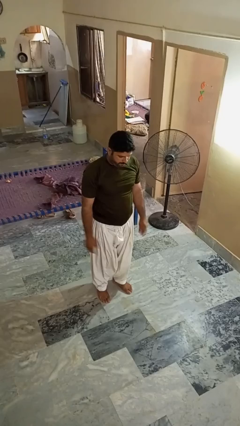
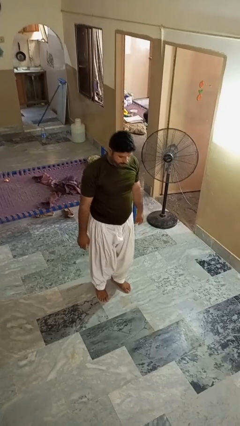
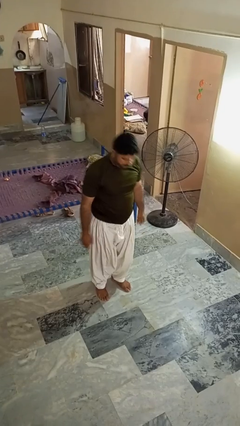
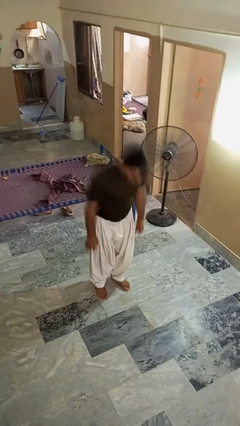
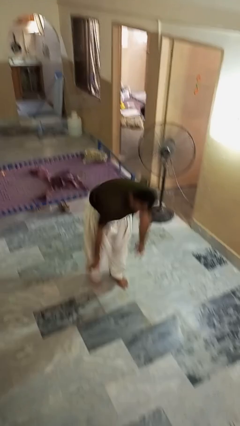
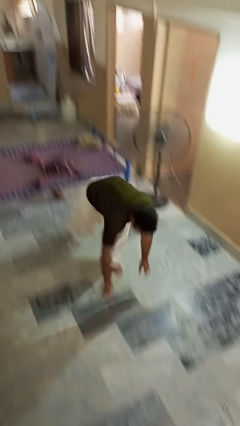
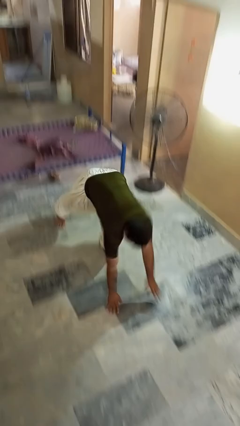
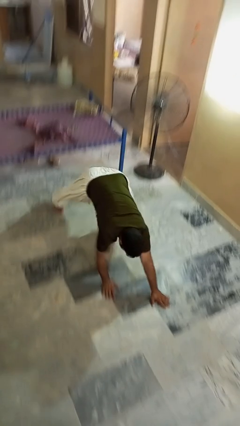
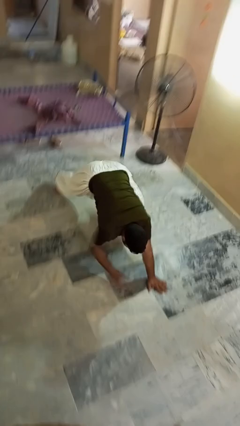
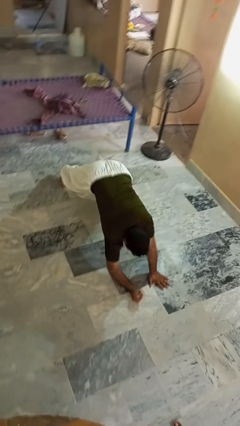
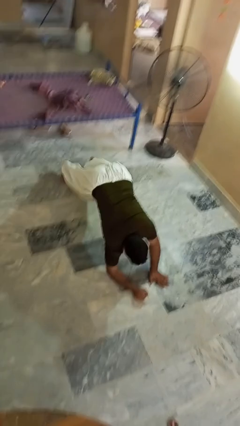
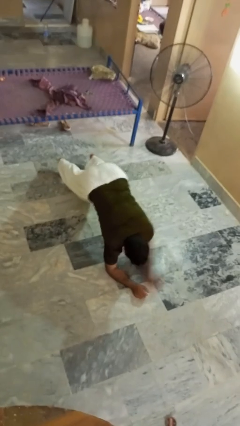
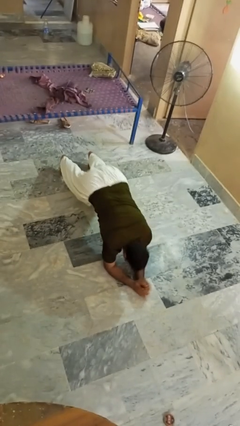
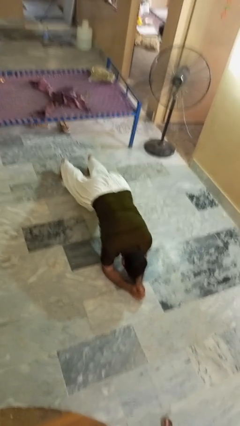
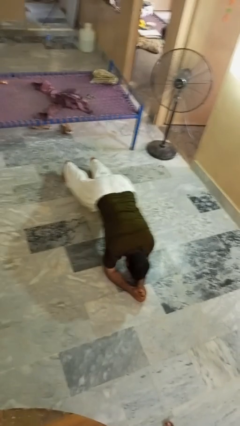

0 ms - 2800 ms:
person exercises with plank

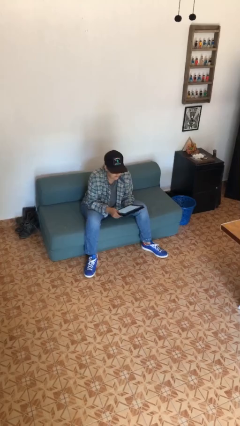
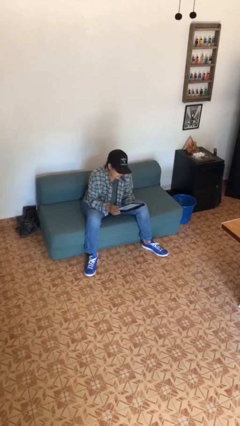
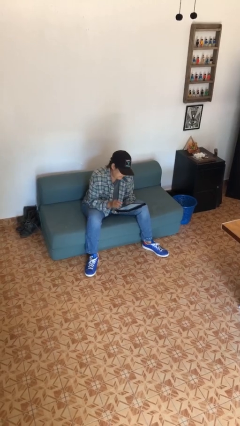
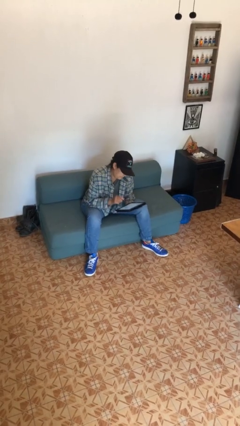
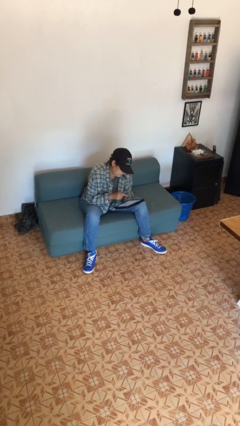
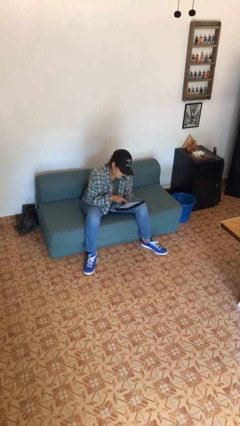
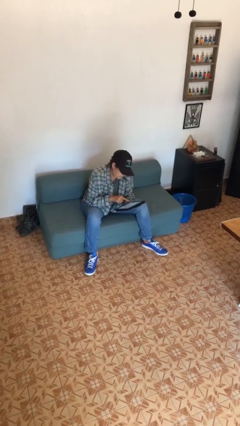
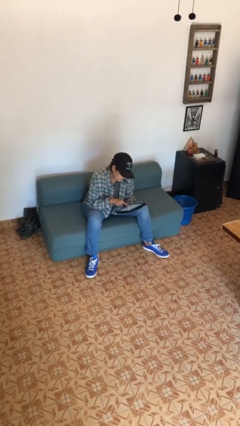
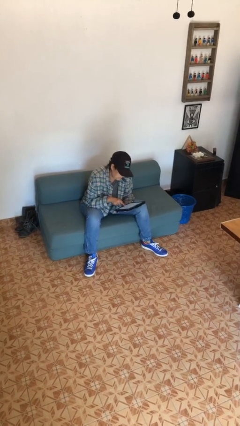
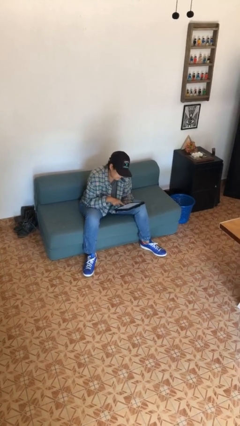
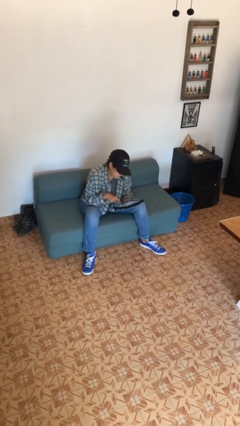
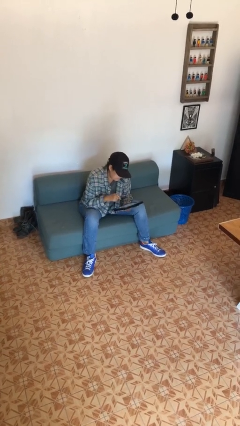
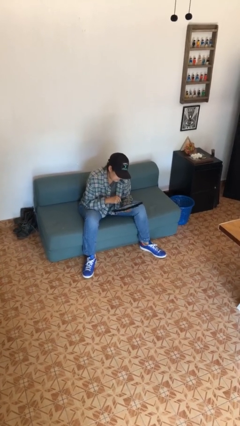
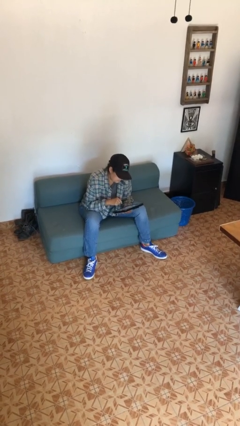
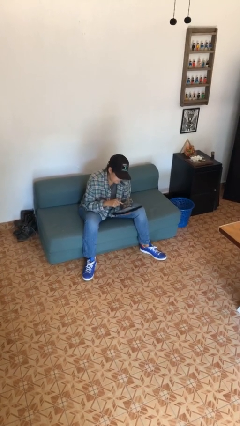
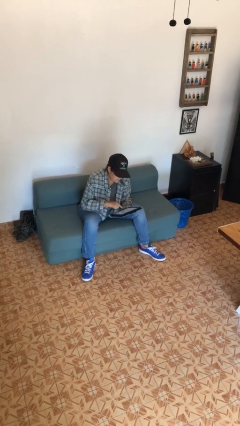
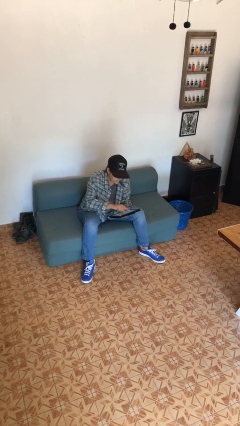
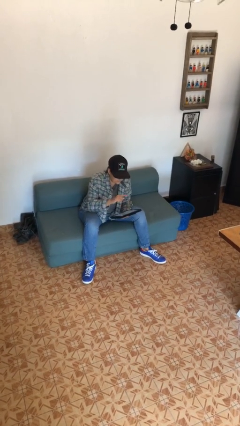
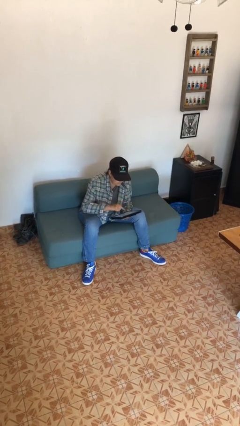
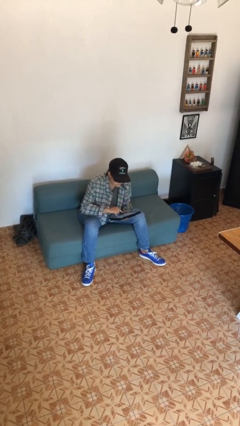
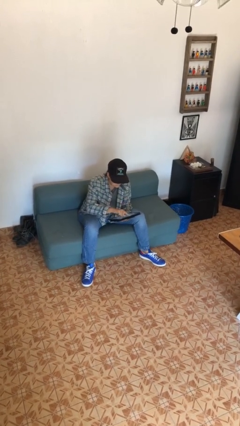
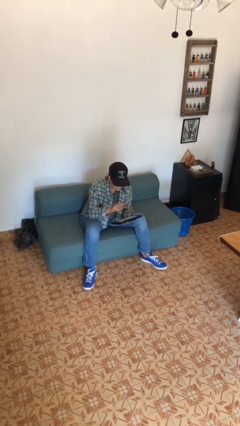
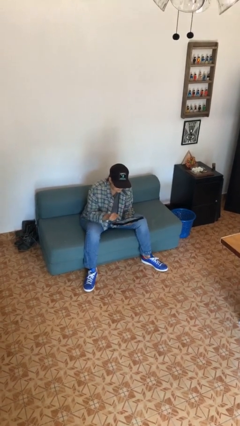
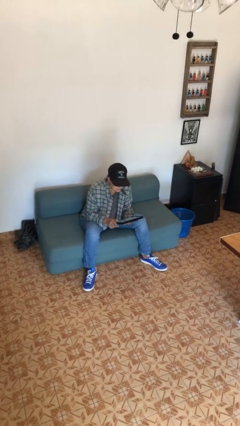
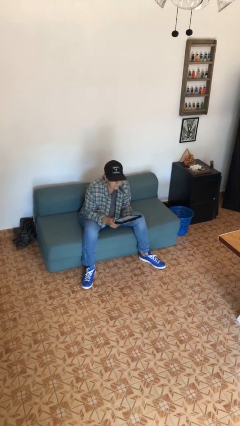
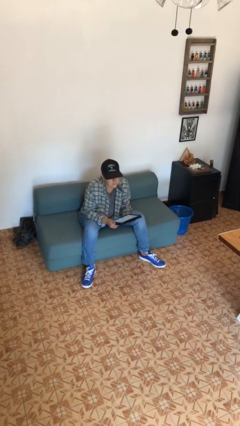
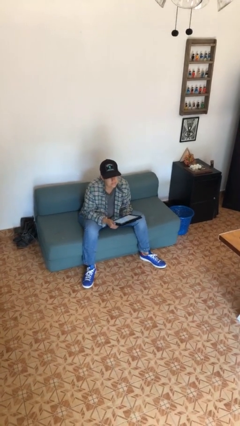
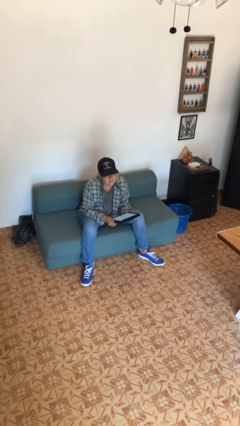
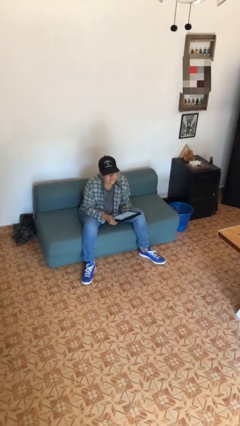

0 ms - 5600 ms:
person interacts with tablet

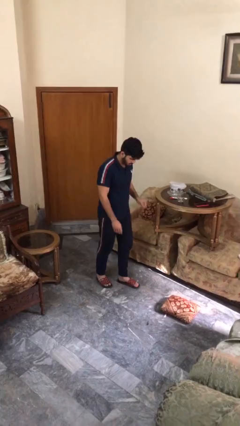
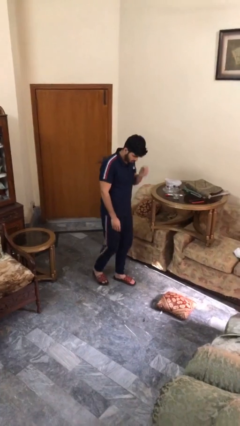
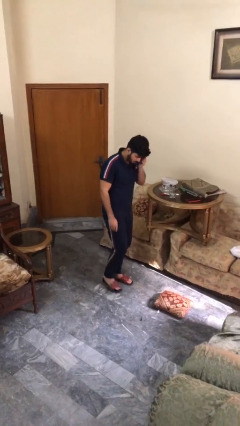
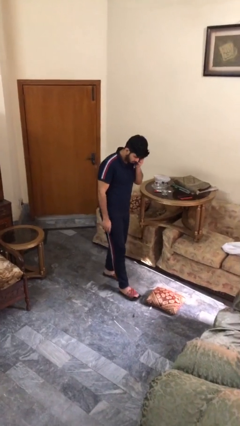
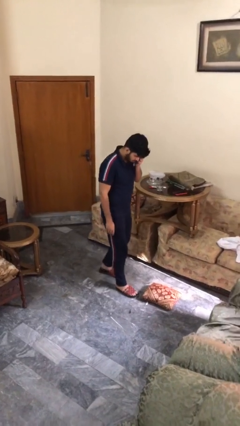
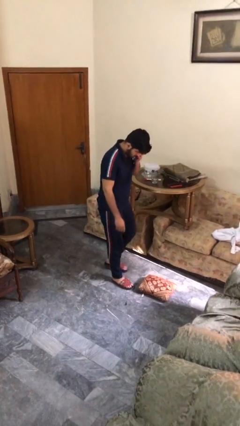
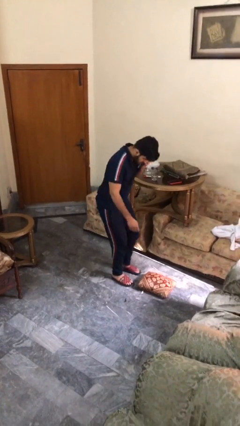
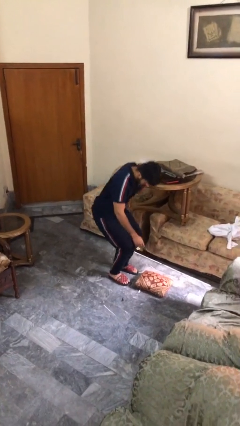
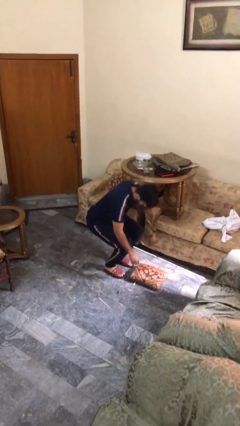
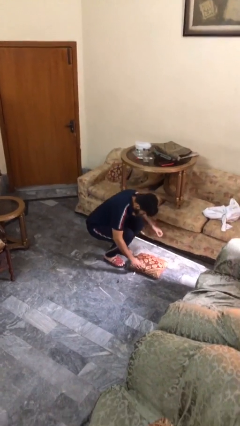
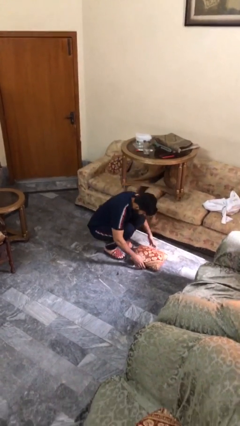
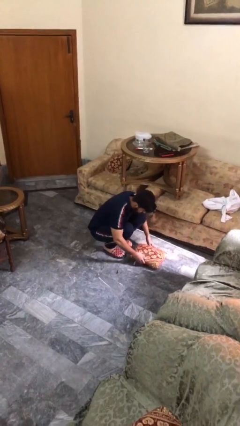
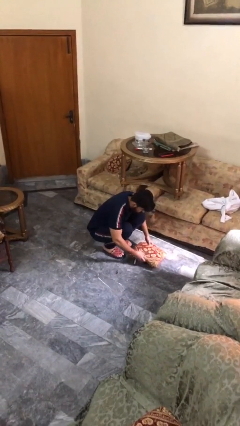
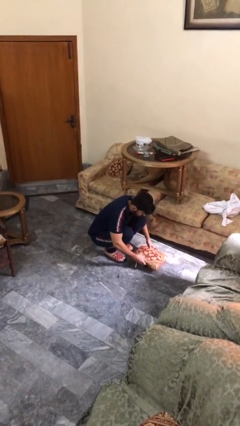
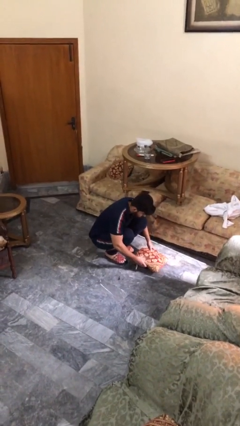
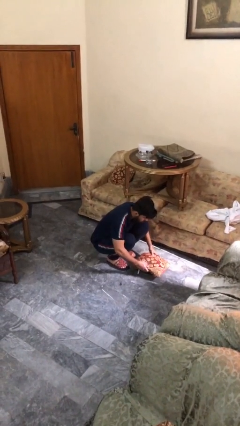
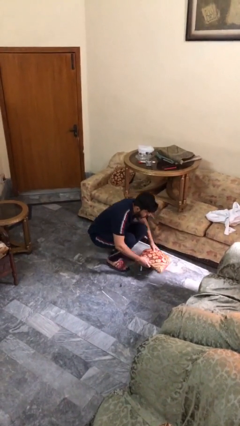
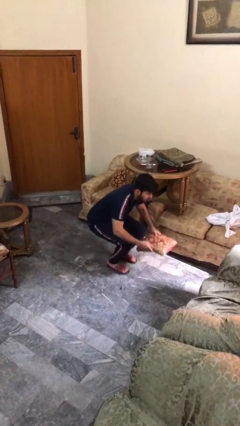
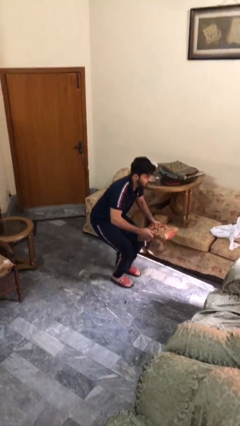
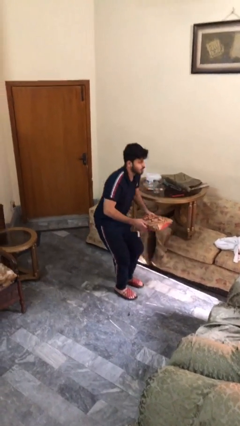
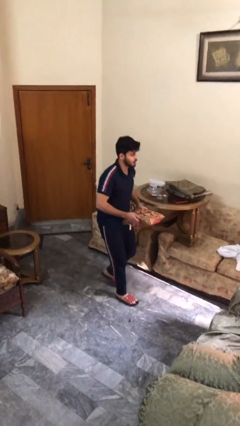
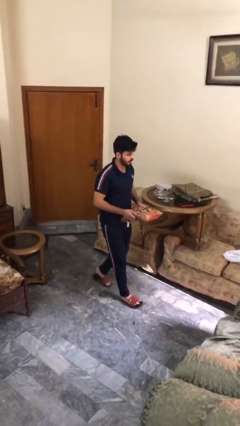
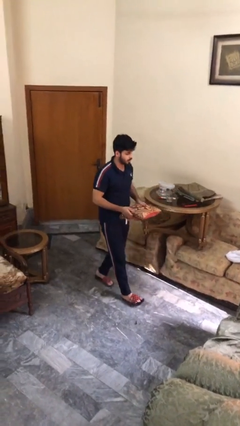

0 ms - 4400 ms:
person picks up object from floor

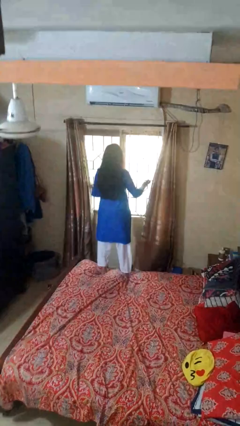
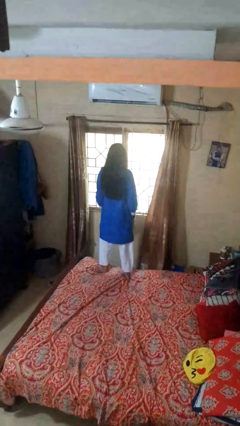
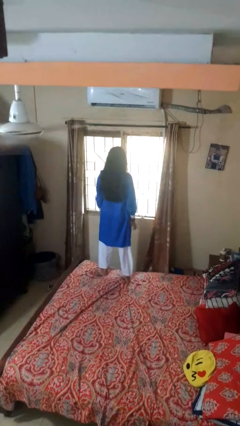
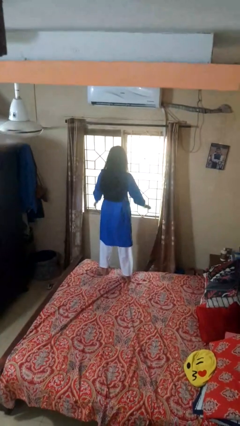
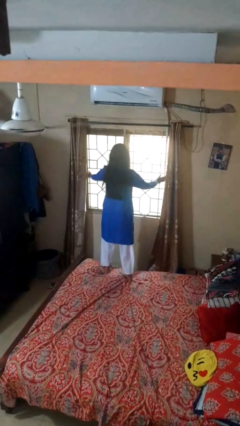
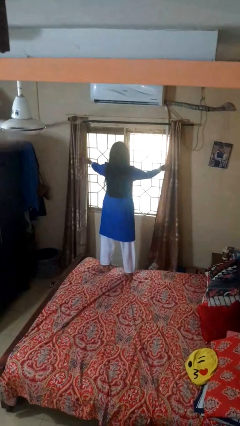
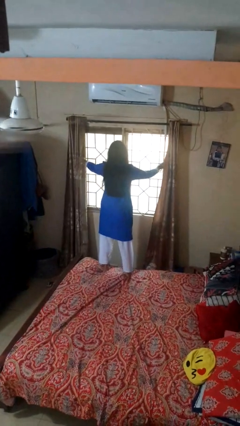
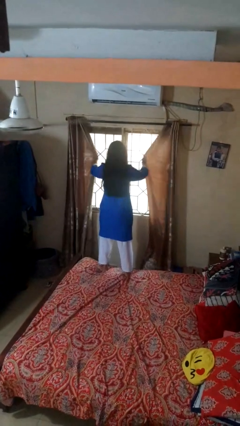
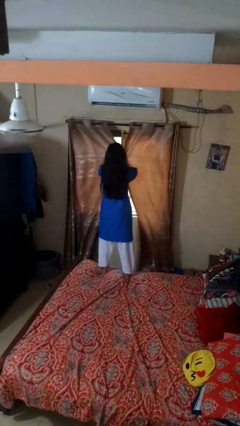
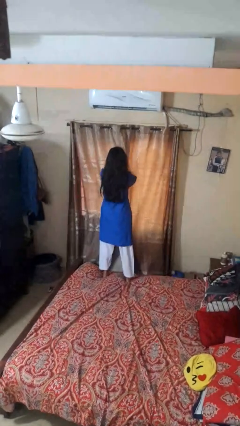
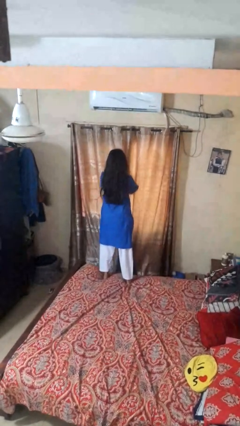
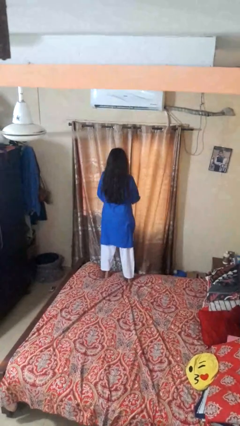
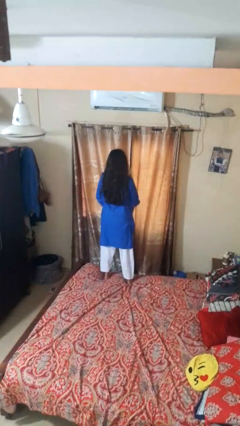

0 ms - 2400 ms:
person closes curtains

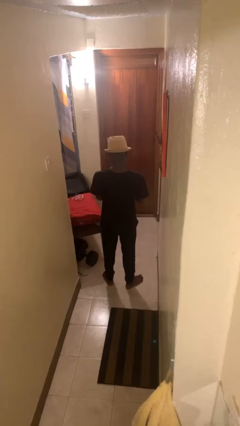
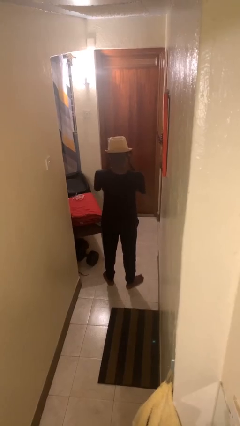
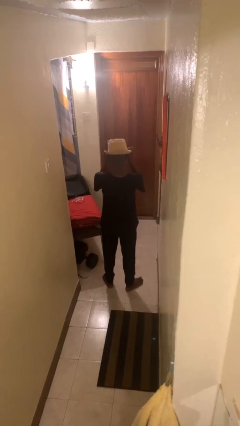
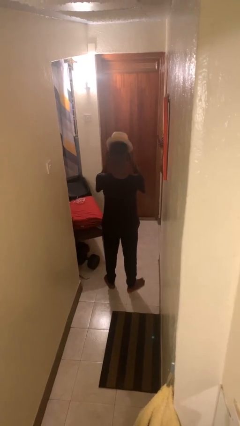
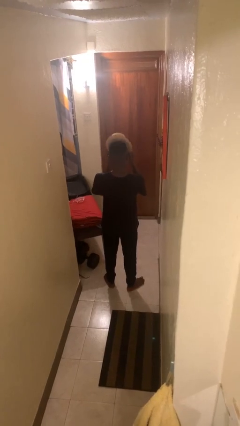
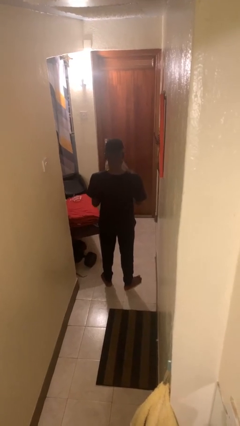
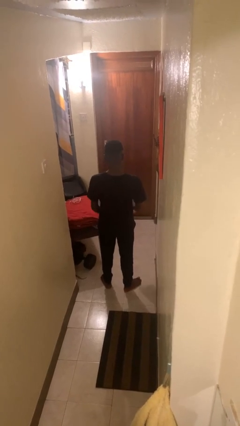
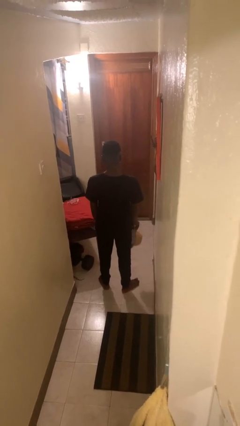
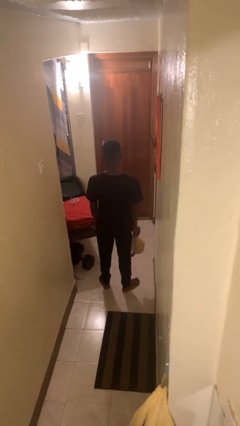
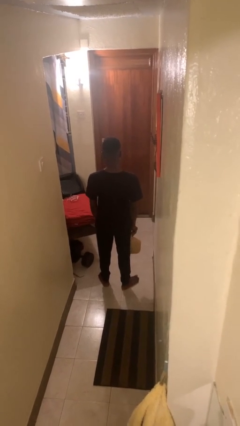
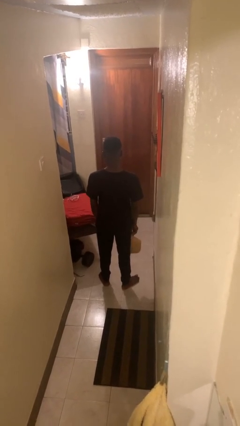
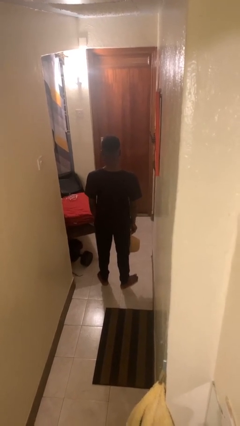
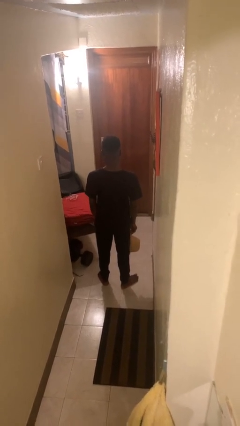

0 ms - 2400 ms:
person takes off hat
